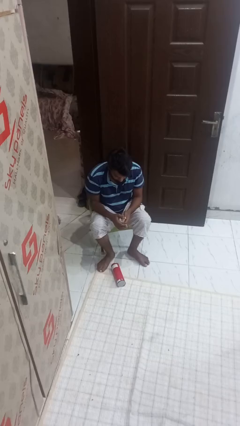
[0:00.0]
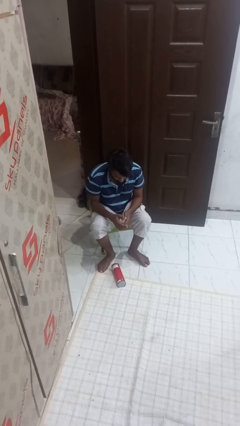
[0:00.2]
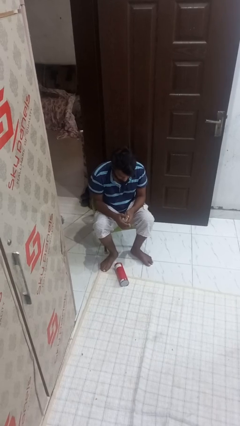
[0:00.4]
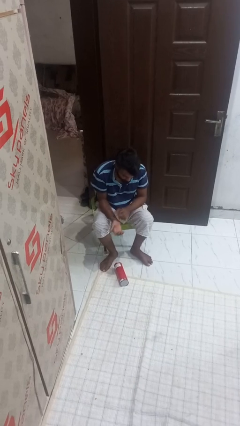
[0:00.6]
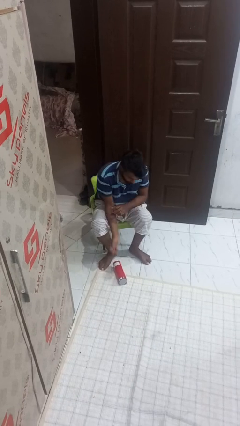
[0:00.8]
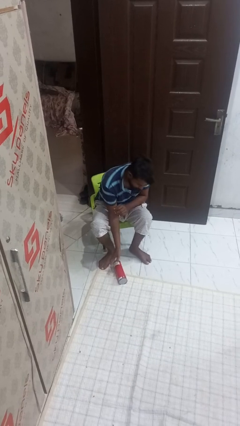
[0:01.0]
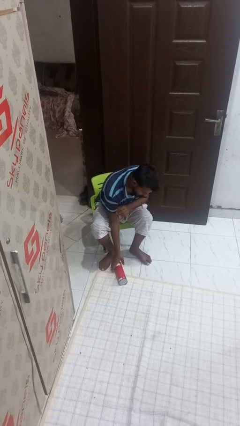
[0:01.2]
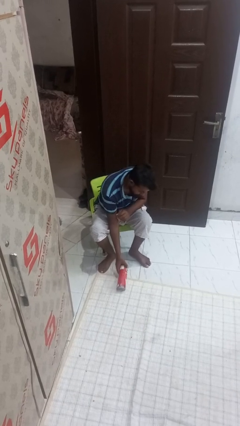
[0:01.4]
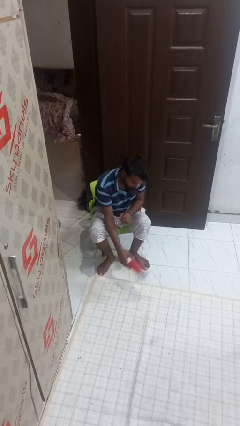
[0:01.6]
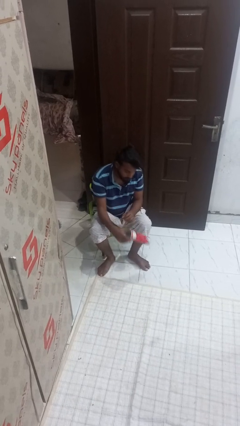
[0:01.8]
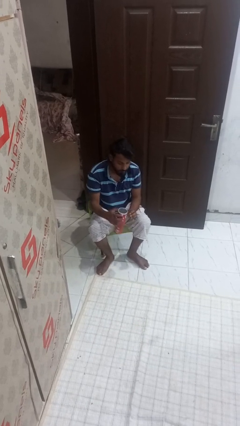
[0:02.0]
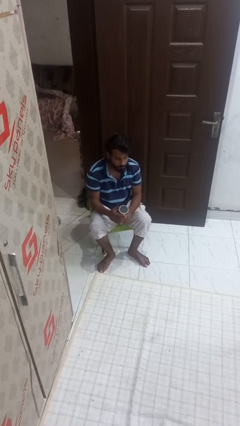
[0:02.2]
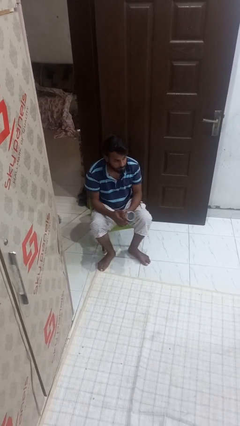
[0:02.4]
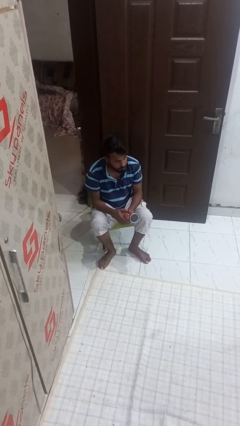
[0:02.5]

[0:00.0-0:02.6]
person picks up object from floor

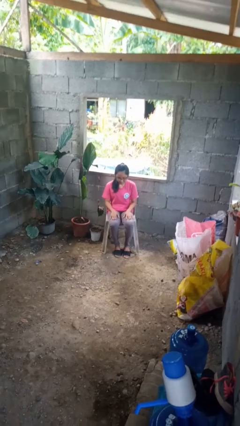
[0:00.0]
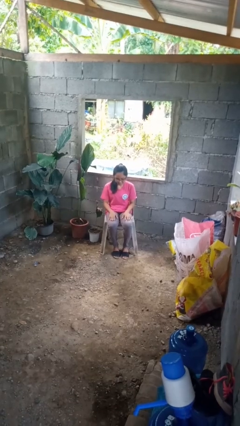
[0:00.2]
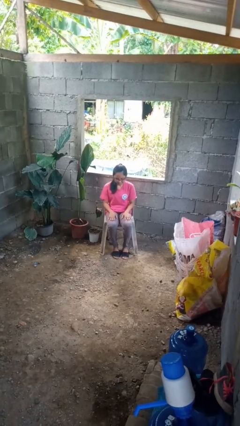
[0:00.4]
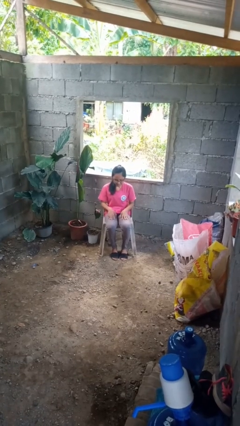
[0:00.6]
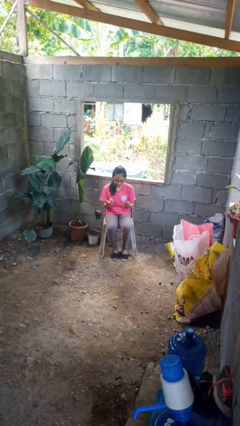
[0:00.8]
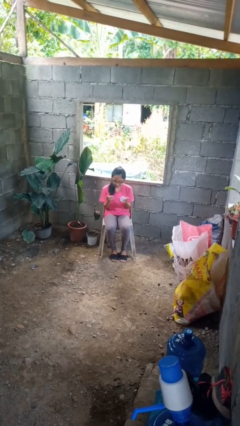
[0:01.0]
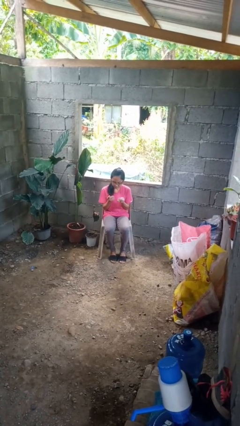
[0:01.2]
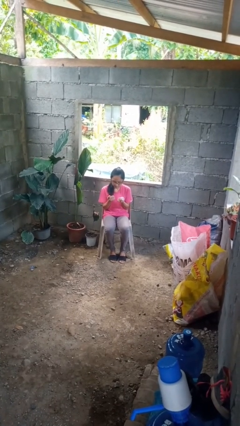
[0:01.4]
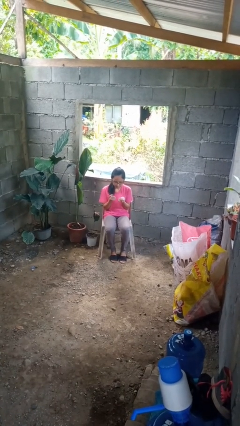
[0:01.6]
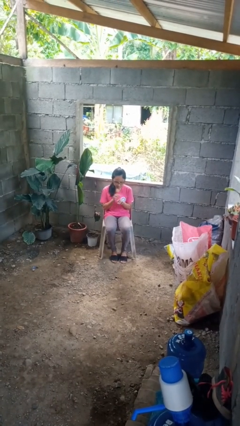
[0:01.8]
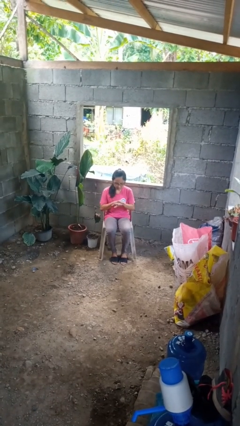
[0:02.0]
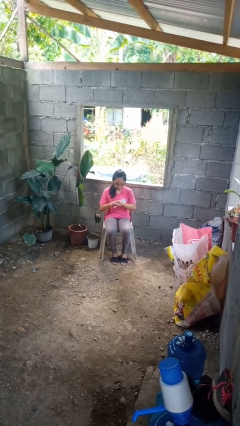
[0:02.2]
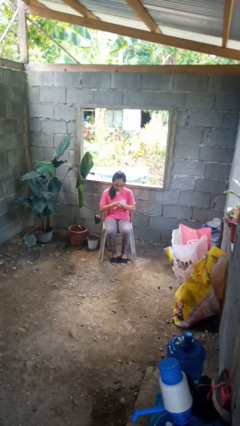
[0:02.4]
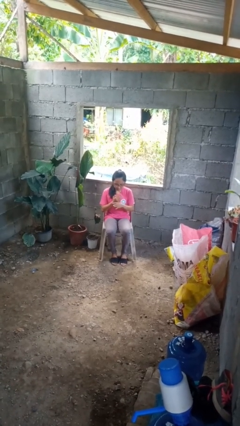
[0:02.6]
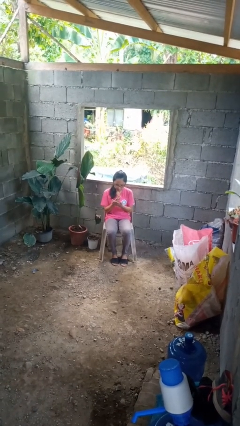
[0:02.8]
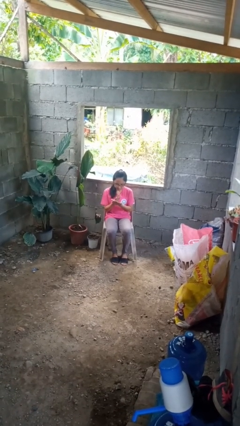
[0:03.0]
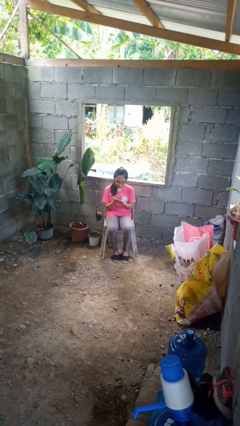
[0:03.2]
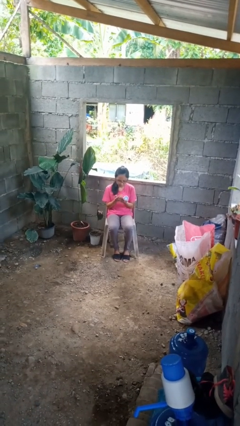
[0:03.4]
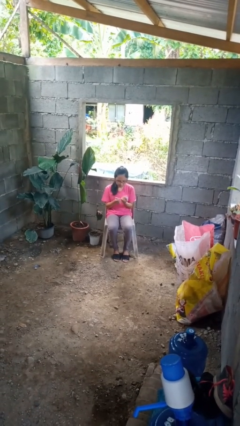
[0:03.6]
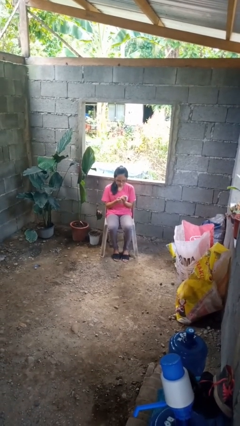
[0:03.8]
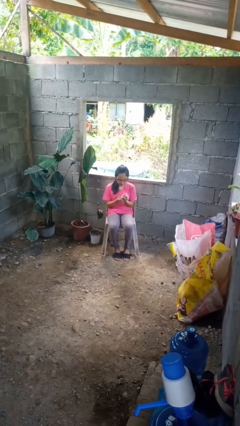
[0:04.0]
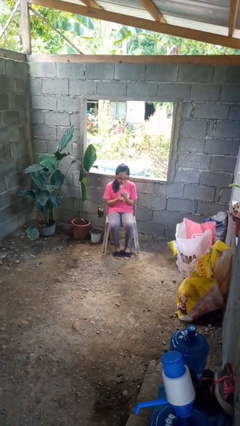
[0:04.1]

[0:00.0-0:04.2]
person looks at hands in lap

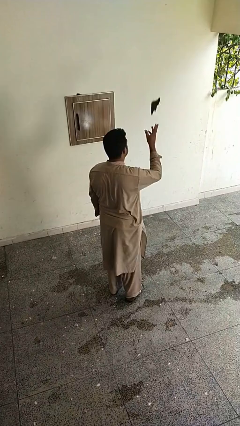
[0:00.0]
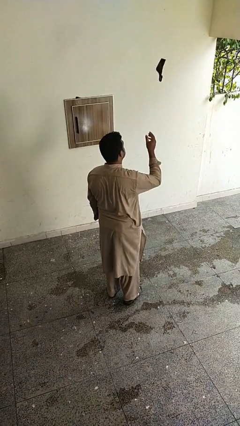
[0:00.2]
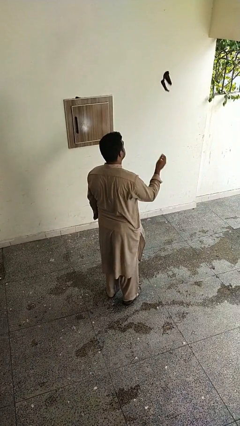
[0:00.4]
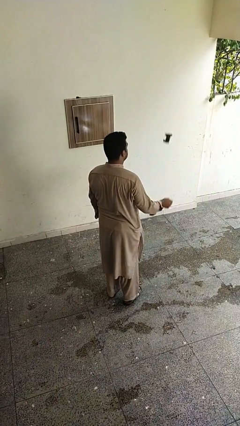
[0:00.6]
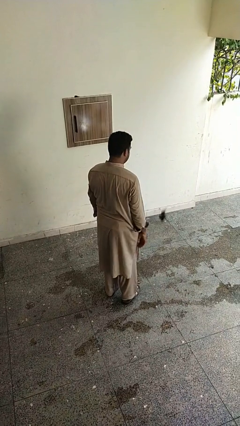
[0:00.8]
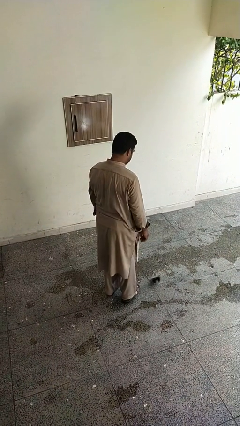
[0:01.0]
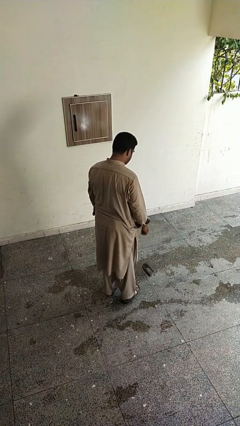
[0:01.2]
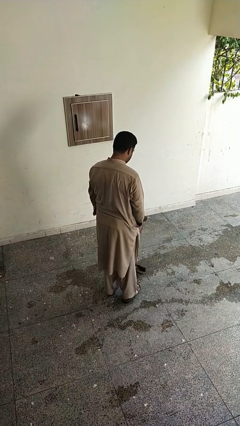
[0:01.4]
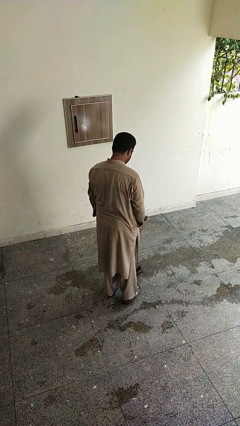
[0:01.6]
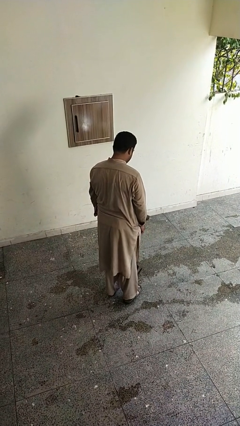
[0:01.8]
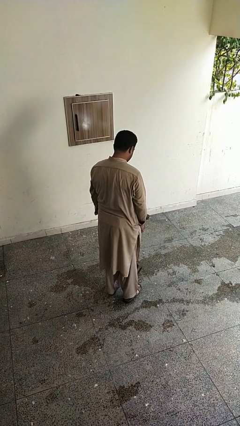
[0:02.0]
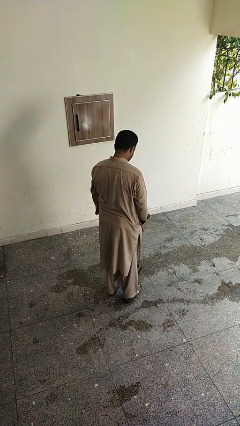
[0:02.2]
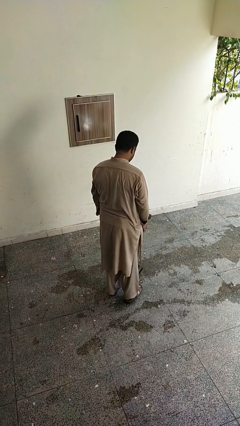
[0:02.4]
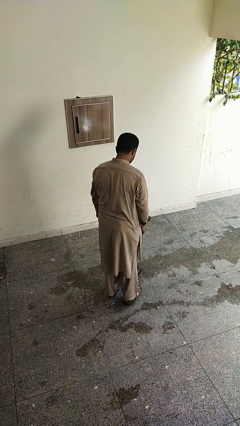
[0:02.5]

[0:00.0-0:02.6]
person throws object into air

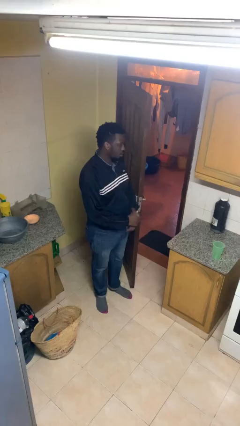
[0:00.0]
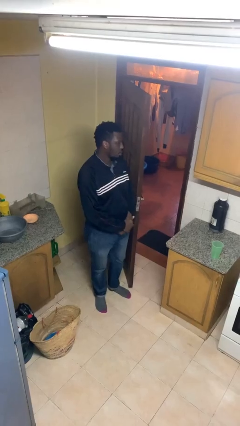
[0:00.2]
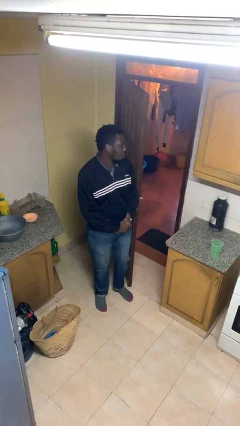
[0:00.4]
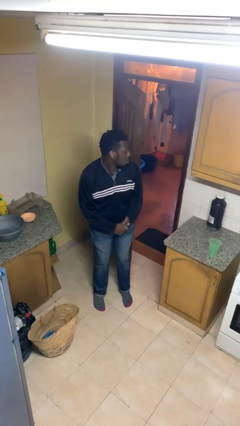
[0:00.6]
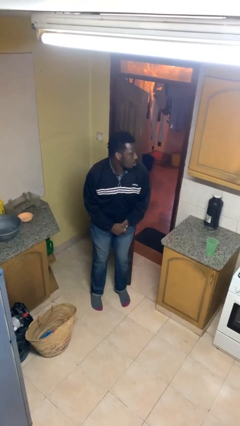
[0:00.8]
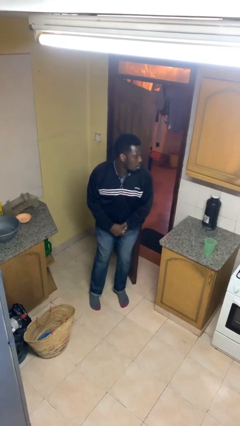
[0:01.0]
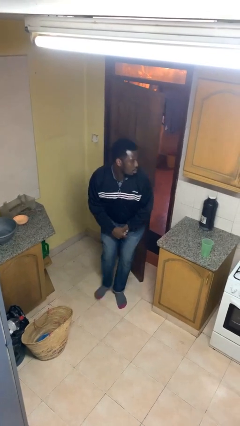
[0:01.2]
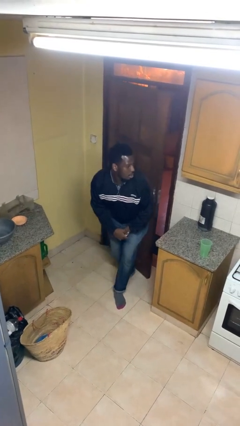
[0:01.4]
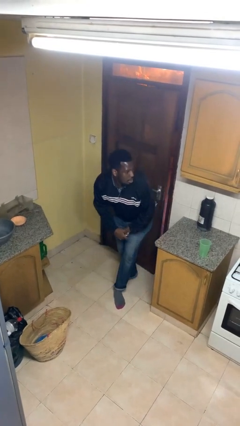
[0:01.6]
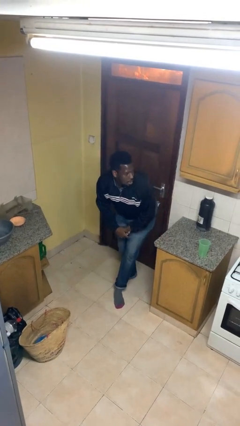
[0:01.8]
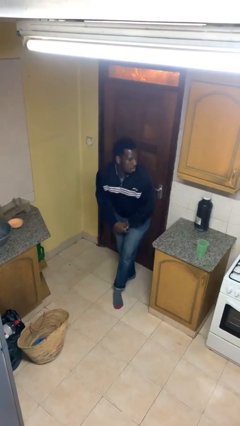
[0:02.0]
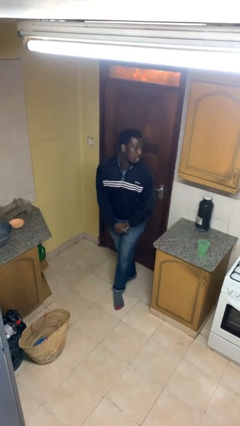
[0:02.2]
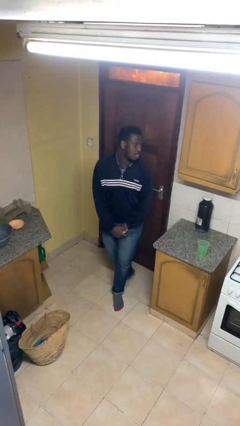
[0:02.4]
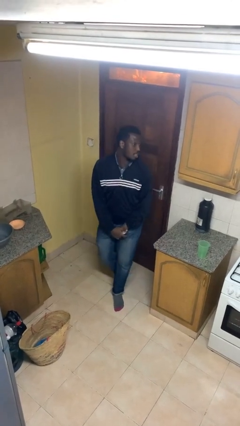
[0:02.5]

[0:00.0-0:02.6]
person closes door with hip

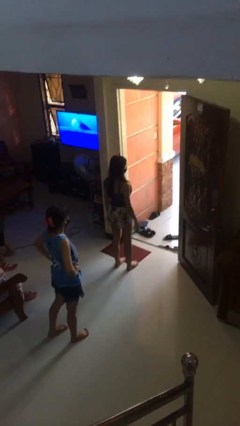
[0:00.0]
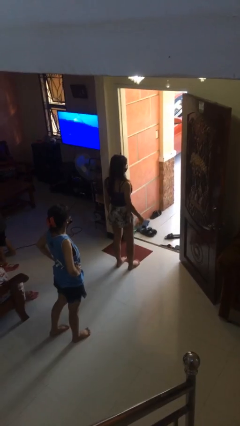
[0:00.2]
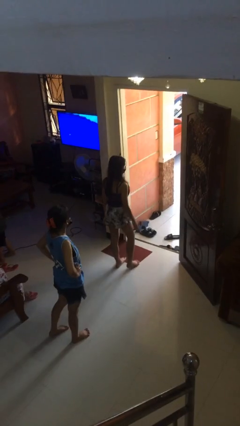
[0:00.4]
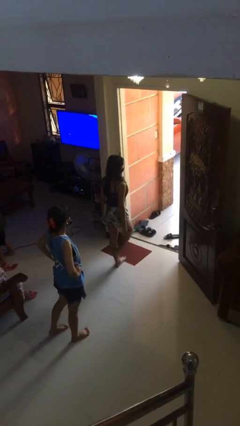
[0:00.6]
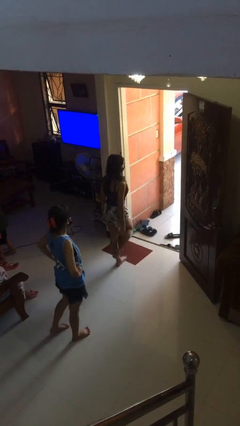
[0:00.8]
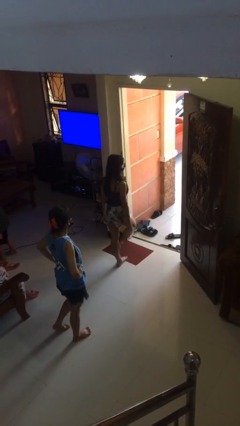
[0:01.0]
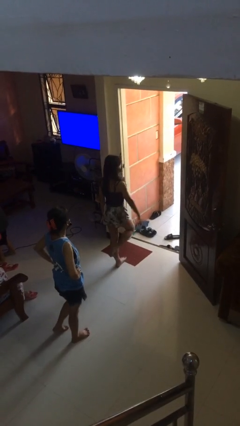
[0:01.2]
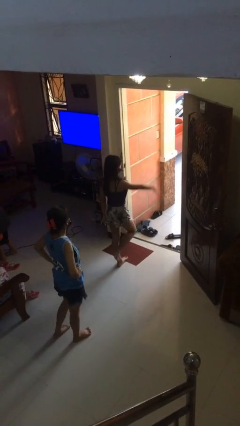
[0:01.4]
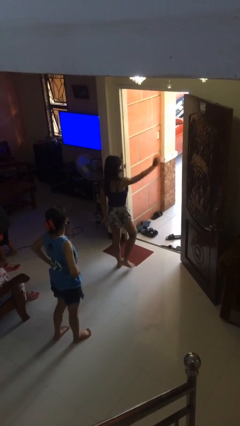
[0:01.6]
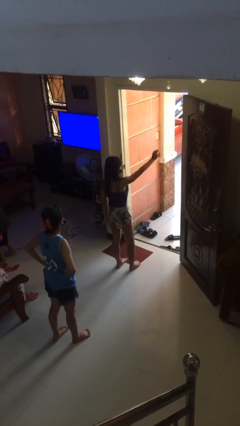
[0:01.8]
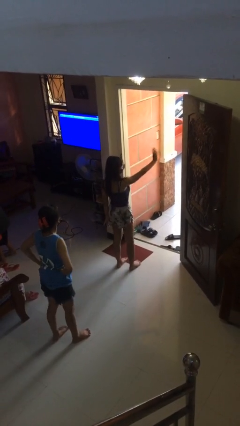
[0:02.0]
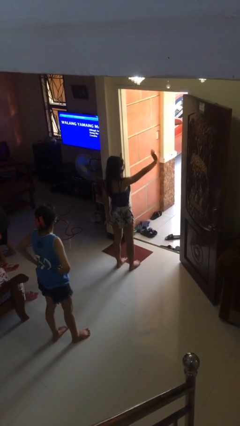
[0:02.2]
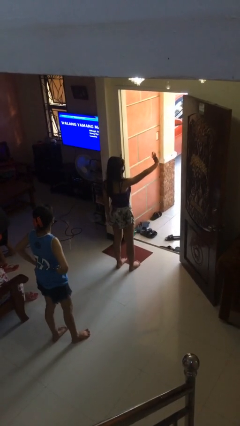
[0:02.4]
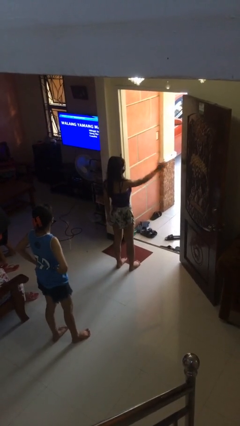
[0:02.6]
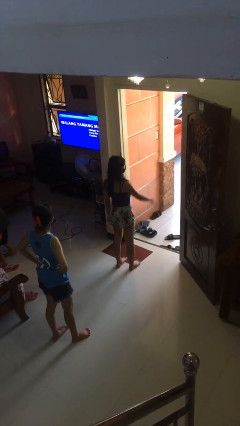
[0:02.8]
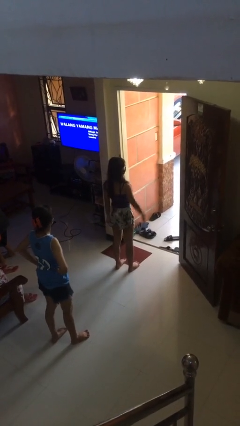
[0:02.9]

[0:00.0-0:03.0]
person waves at person

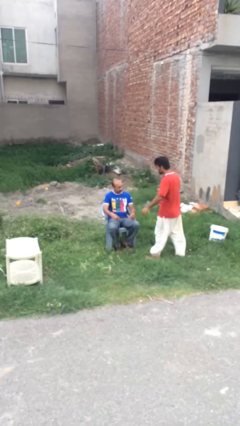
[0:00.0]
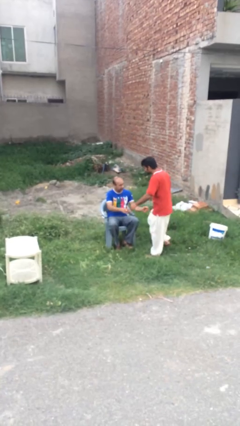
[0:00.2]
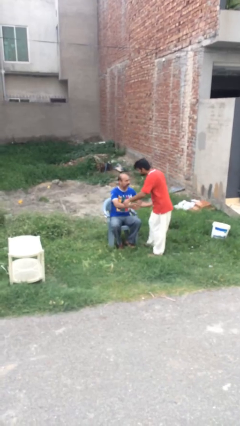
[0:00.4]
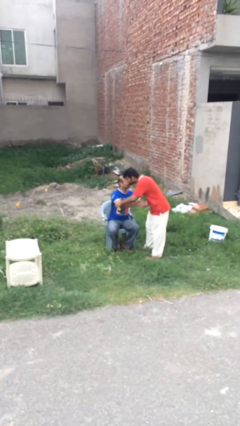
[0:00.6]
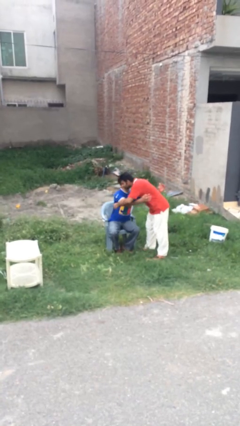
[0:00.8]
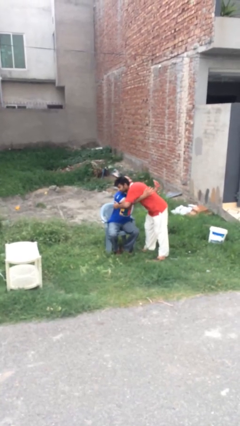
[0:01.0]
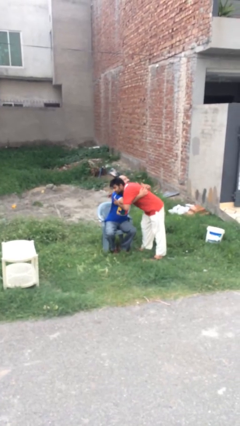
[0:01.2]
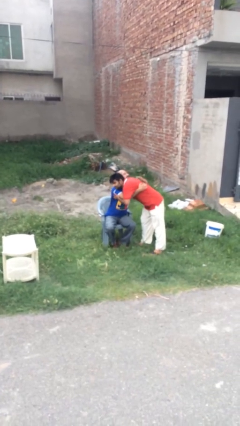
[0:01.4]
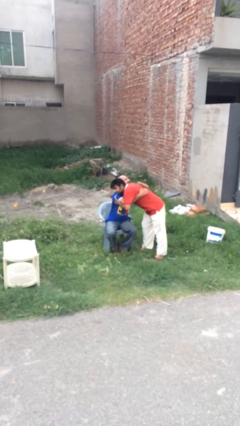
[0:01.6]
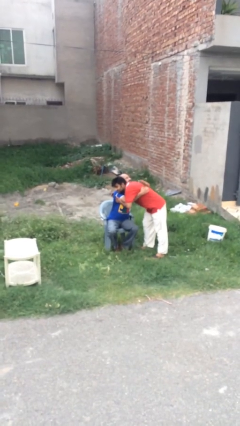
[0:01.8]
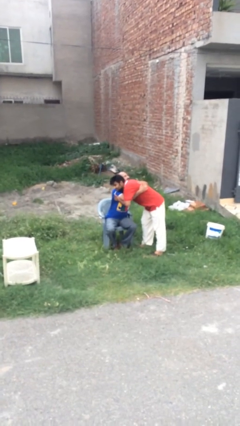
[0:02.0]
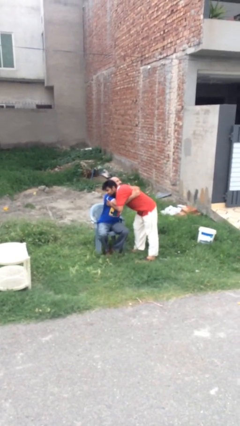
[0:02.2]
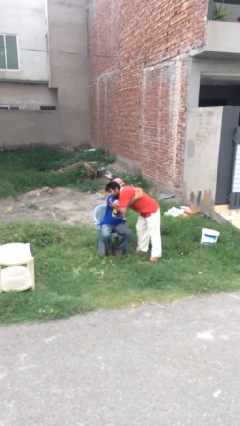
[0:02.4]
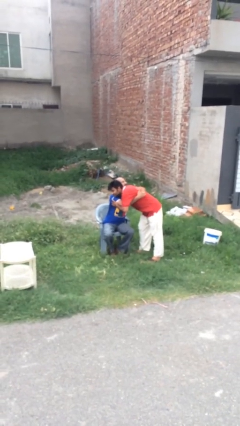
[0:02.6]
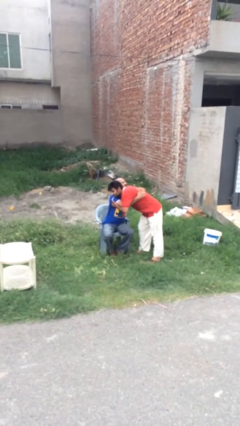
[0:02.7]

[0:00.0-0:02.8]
person embraces person
